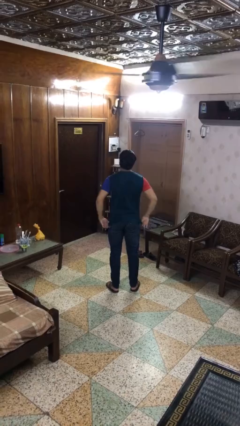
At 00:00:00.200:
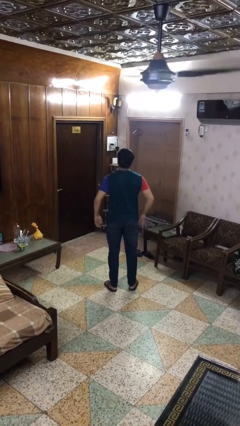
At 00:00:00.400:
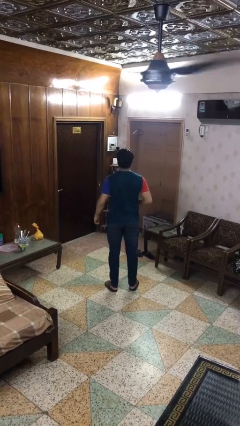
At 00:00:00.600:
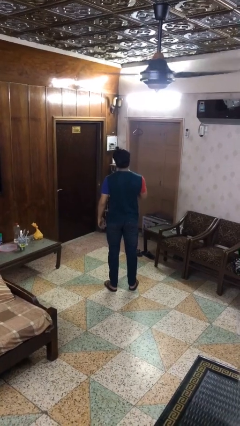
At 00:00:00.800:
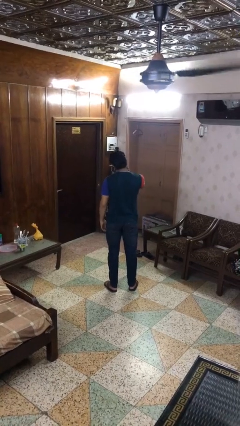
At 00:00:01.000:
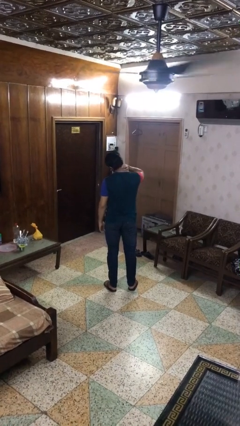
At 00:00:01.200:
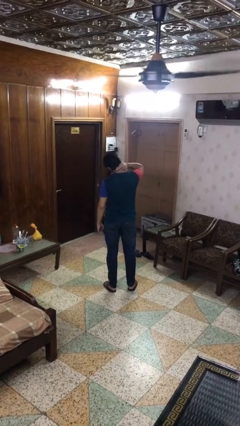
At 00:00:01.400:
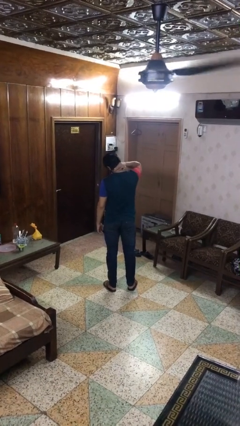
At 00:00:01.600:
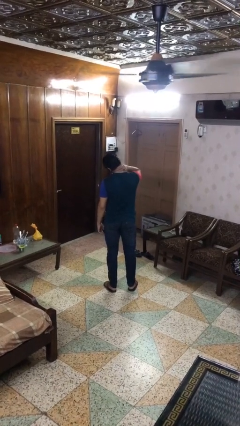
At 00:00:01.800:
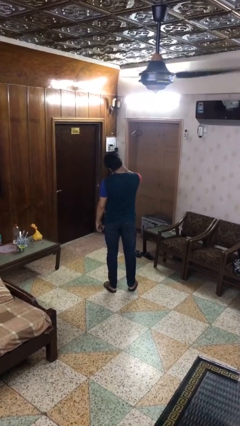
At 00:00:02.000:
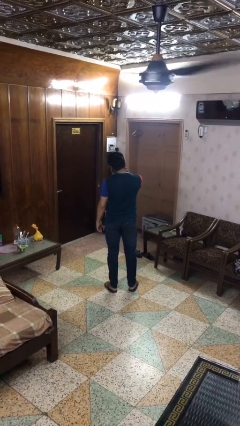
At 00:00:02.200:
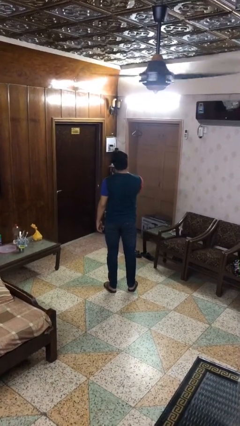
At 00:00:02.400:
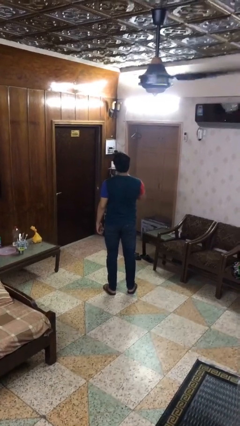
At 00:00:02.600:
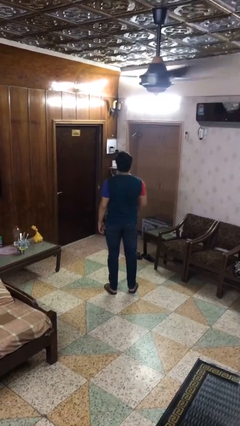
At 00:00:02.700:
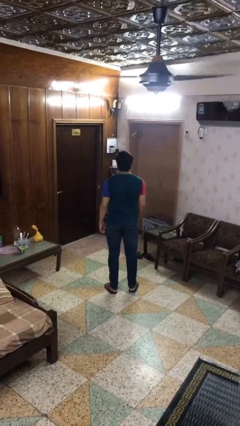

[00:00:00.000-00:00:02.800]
person rubs neck

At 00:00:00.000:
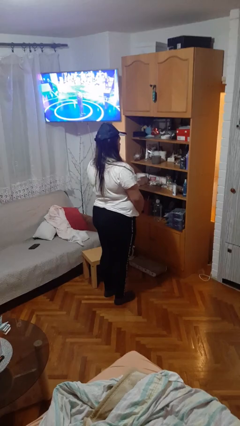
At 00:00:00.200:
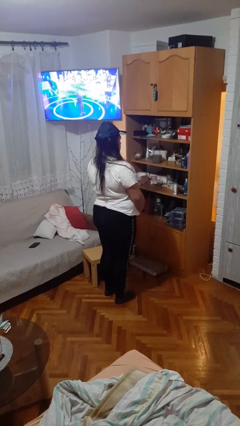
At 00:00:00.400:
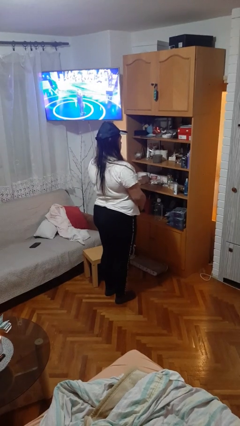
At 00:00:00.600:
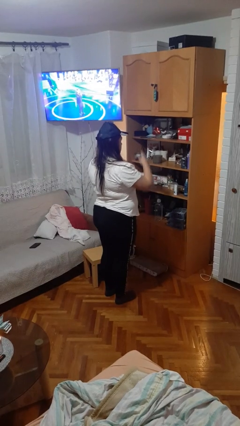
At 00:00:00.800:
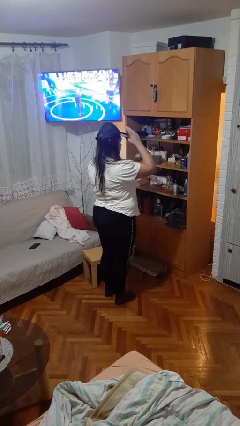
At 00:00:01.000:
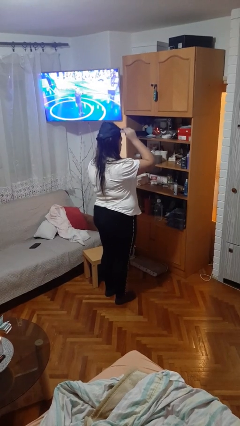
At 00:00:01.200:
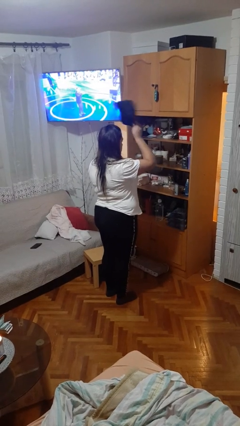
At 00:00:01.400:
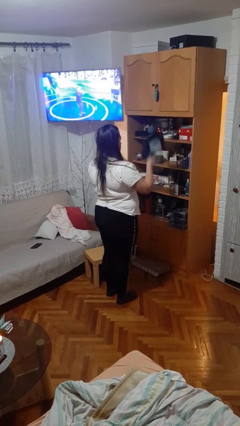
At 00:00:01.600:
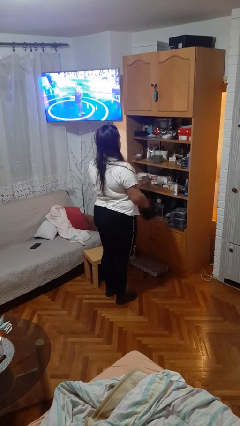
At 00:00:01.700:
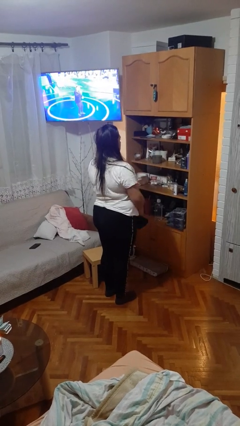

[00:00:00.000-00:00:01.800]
person takes off hat

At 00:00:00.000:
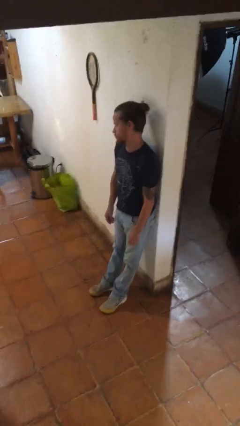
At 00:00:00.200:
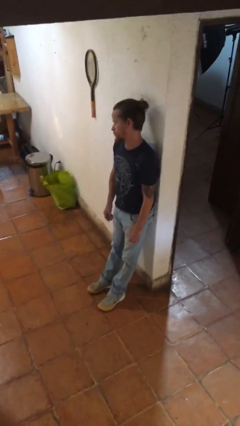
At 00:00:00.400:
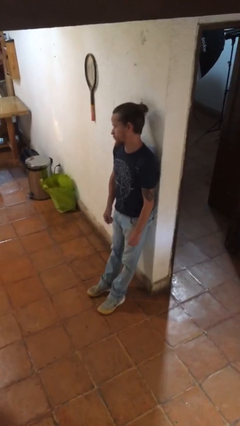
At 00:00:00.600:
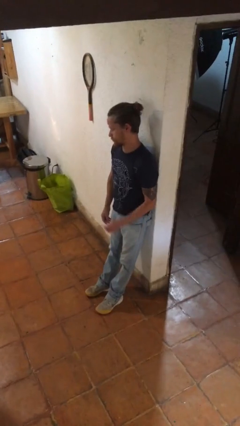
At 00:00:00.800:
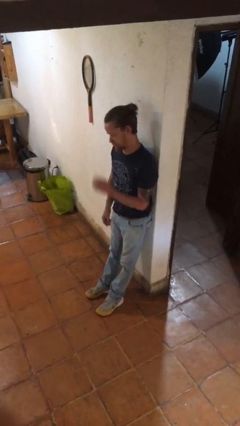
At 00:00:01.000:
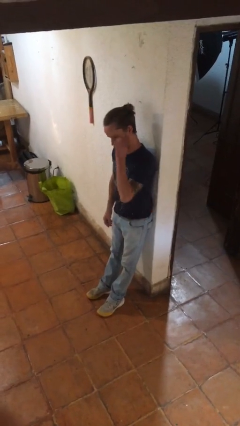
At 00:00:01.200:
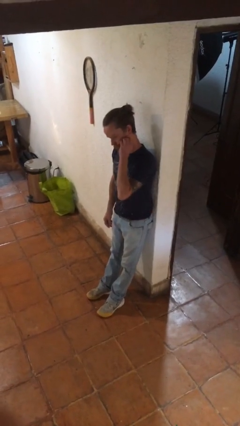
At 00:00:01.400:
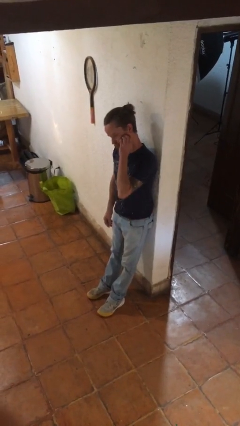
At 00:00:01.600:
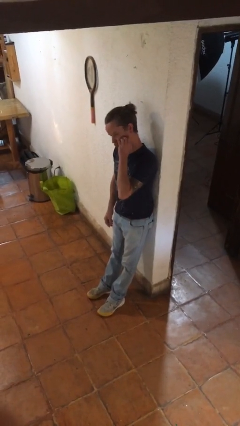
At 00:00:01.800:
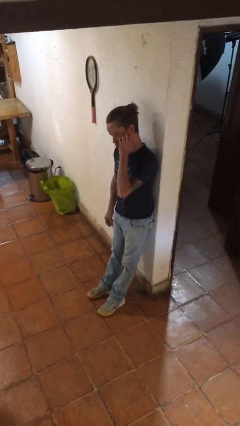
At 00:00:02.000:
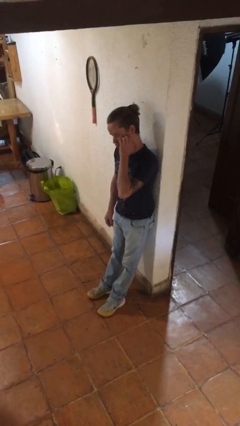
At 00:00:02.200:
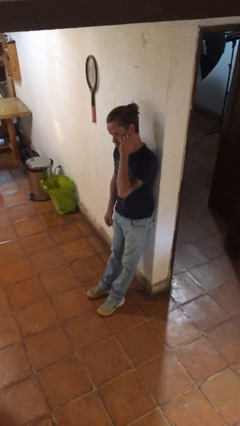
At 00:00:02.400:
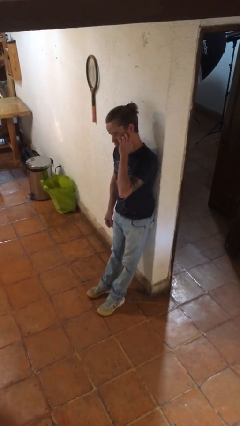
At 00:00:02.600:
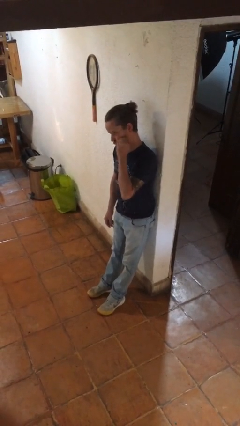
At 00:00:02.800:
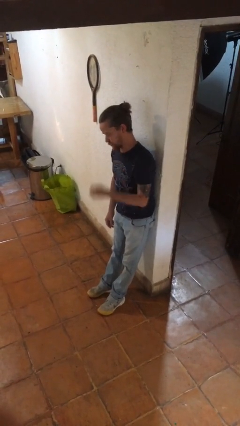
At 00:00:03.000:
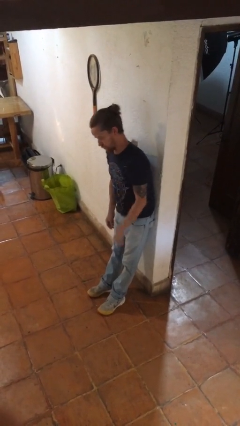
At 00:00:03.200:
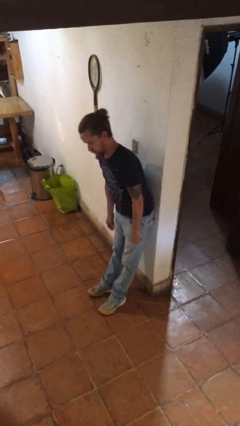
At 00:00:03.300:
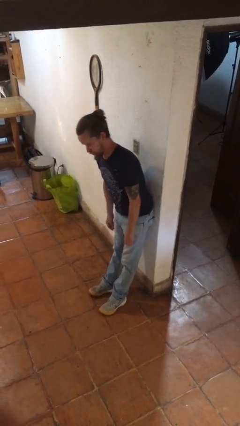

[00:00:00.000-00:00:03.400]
person scratches face

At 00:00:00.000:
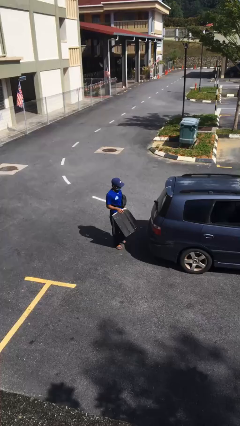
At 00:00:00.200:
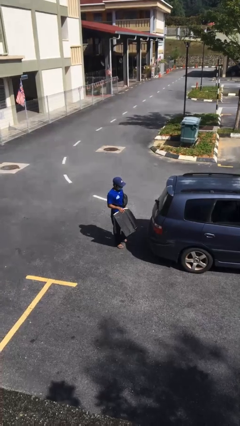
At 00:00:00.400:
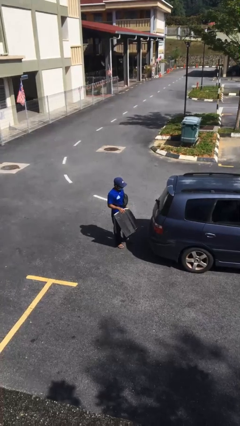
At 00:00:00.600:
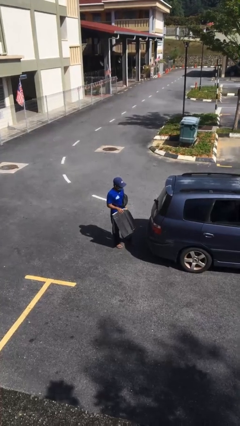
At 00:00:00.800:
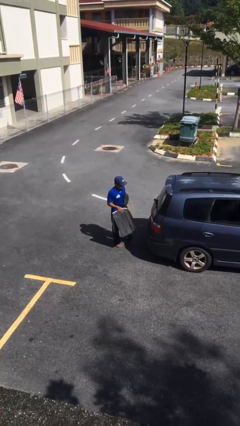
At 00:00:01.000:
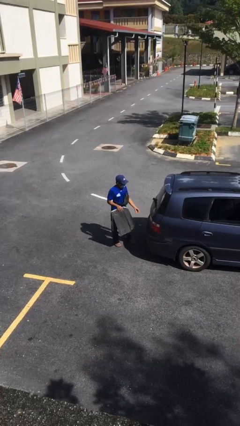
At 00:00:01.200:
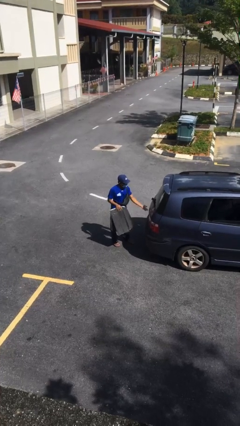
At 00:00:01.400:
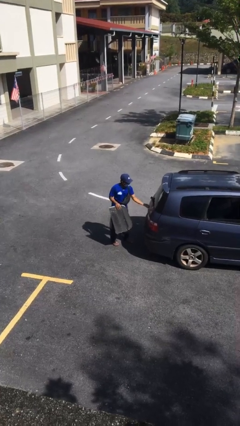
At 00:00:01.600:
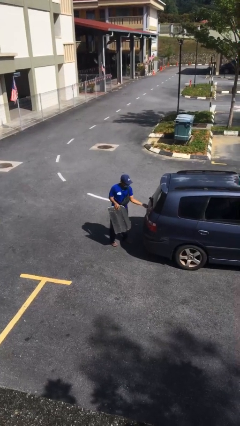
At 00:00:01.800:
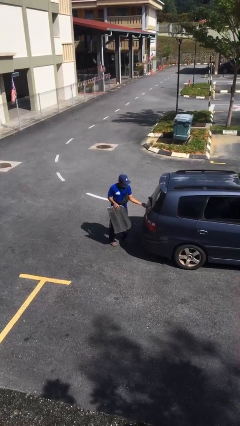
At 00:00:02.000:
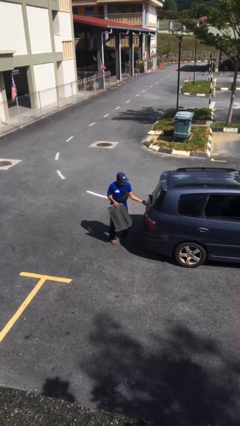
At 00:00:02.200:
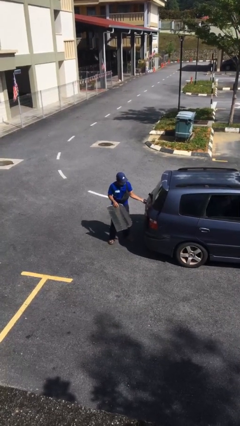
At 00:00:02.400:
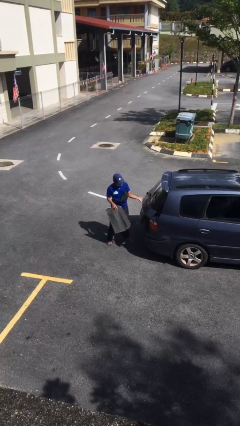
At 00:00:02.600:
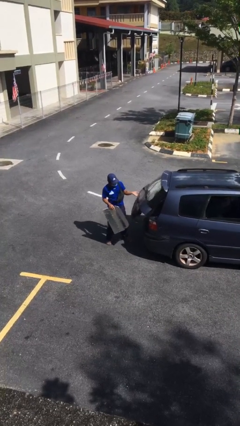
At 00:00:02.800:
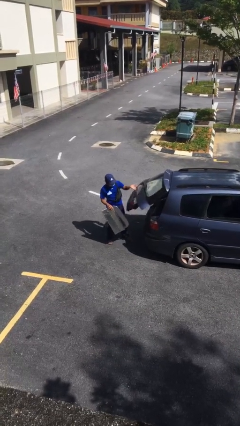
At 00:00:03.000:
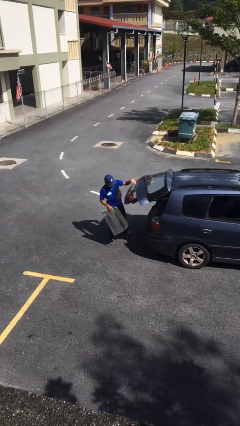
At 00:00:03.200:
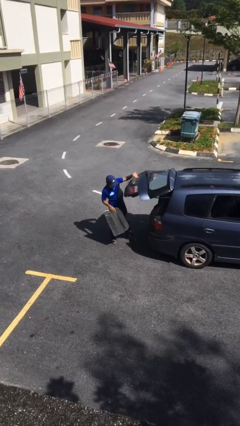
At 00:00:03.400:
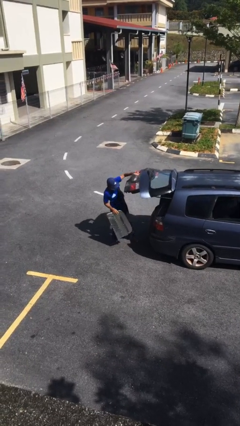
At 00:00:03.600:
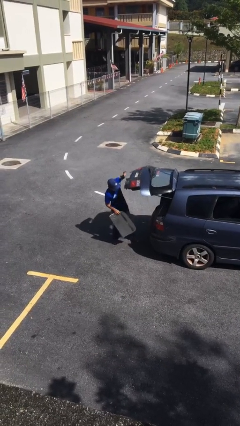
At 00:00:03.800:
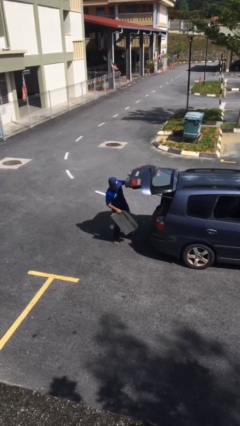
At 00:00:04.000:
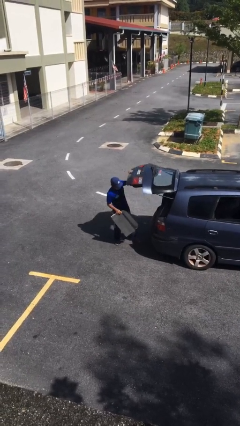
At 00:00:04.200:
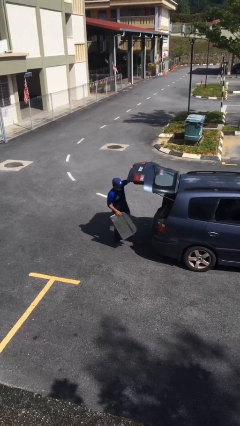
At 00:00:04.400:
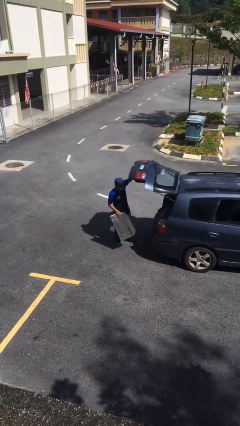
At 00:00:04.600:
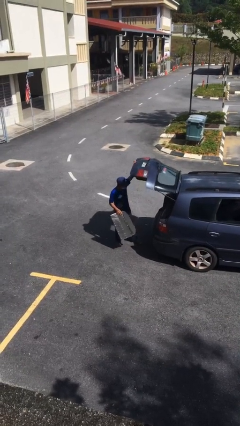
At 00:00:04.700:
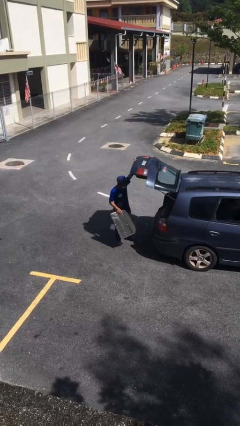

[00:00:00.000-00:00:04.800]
person opens car trunk

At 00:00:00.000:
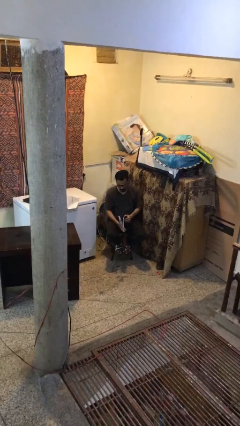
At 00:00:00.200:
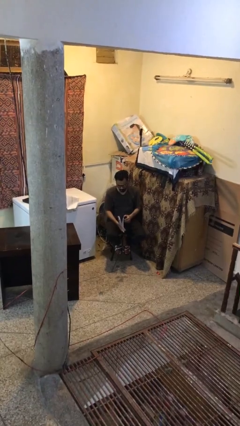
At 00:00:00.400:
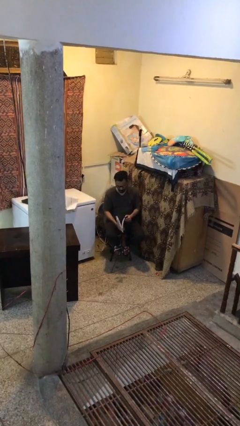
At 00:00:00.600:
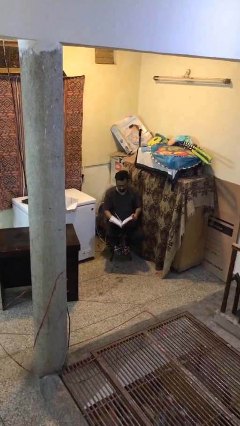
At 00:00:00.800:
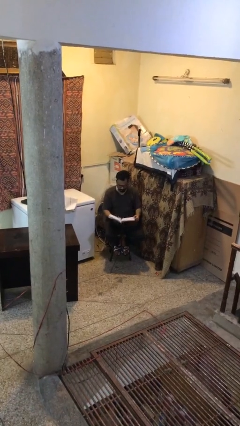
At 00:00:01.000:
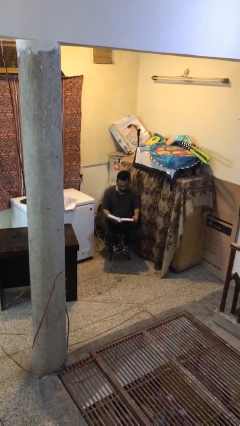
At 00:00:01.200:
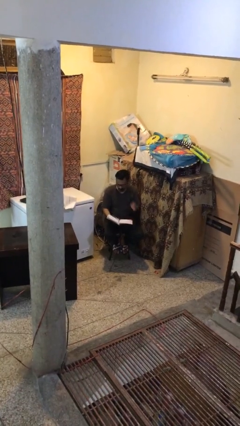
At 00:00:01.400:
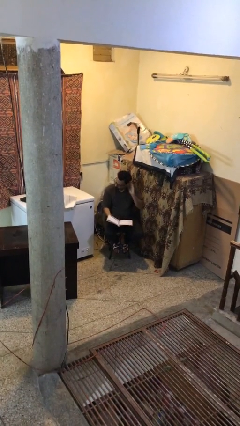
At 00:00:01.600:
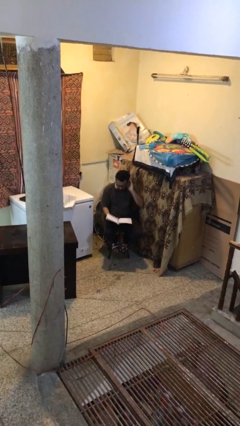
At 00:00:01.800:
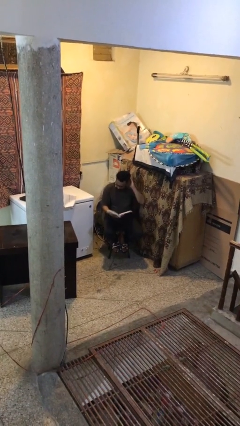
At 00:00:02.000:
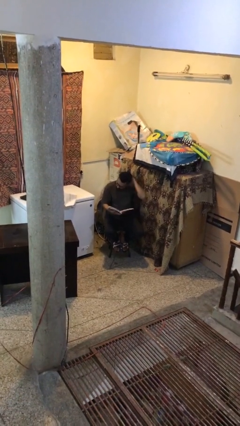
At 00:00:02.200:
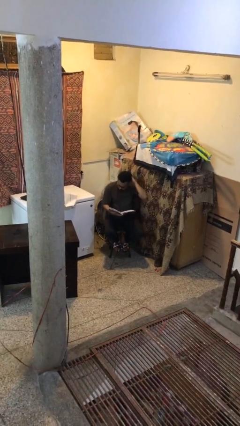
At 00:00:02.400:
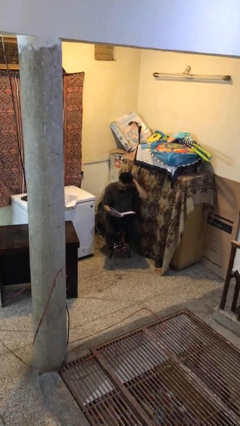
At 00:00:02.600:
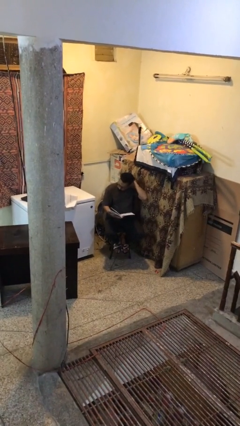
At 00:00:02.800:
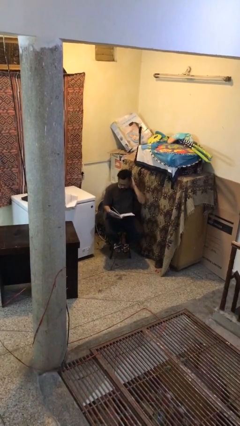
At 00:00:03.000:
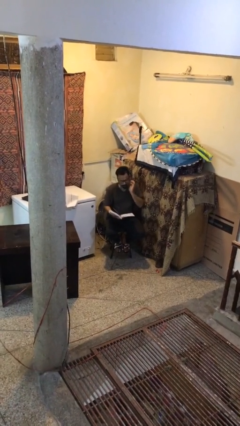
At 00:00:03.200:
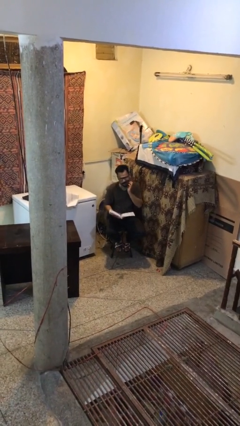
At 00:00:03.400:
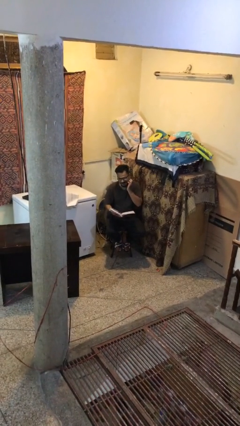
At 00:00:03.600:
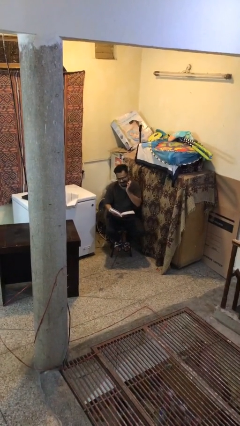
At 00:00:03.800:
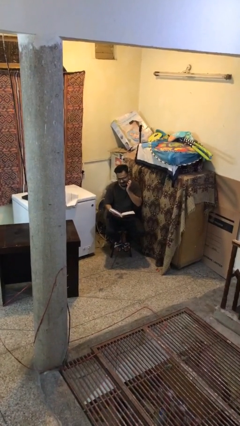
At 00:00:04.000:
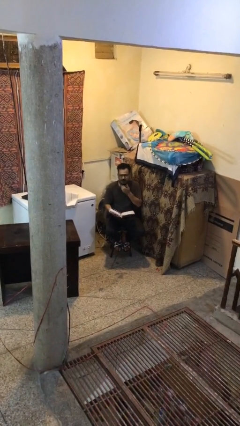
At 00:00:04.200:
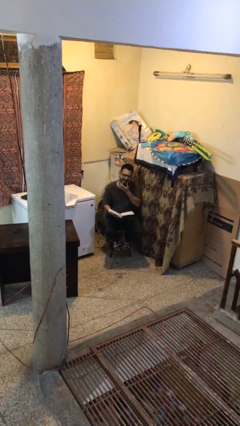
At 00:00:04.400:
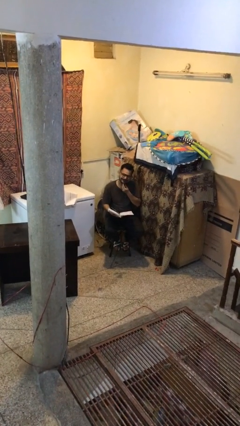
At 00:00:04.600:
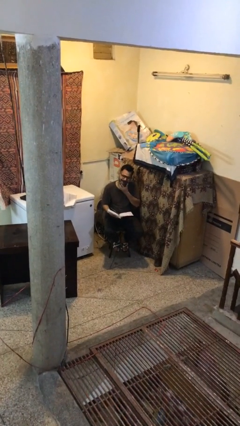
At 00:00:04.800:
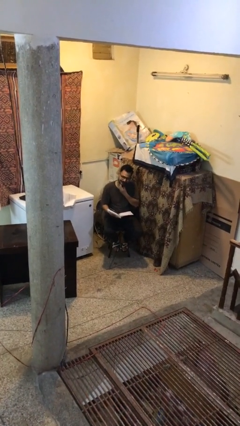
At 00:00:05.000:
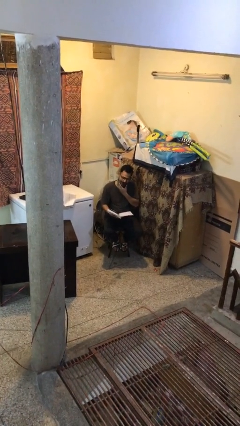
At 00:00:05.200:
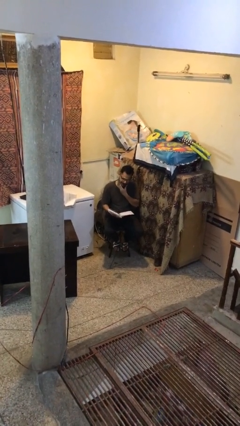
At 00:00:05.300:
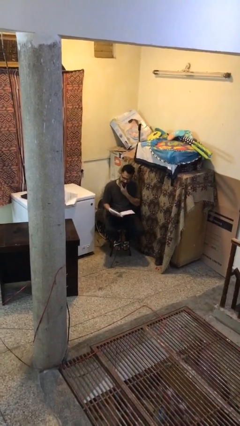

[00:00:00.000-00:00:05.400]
person reads document
